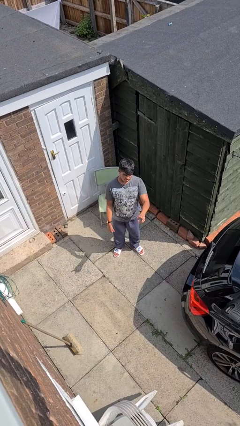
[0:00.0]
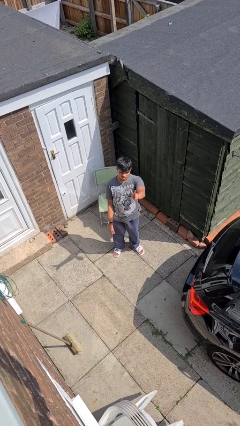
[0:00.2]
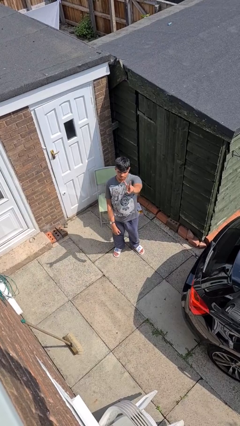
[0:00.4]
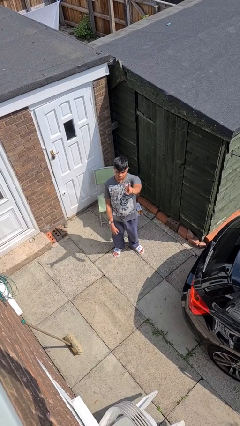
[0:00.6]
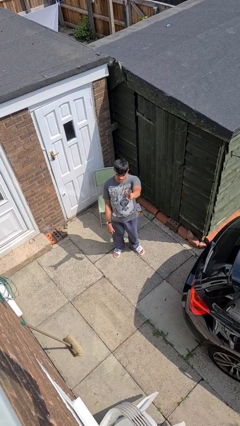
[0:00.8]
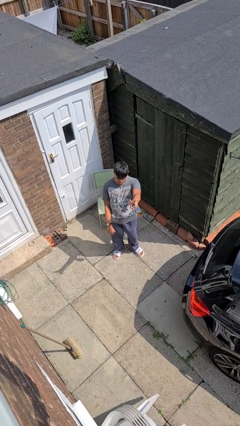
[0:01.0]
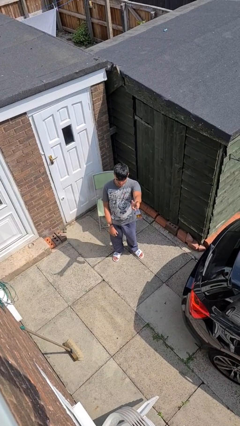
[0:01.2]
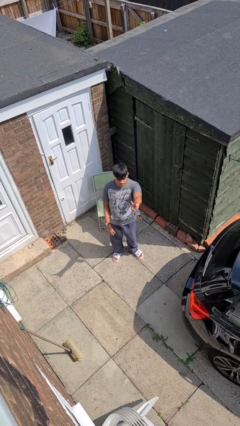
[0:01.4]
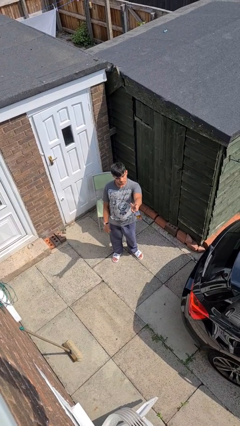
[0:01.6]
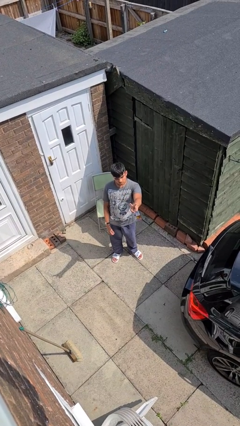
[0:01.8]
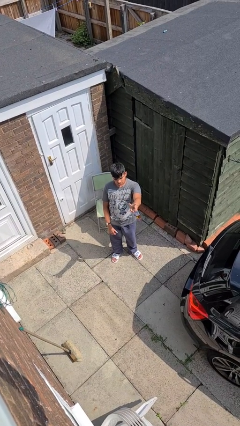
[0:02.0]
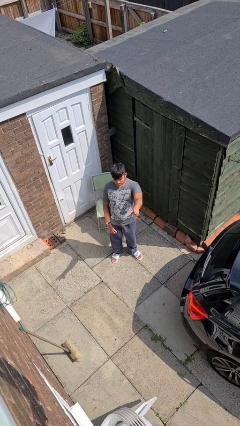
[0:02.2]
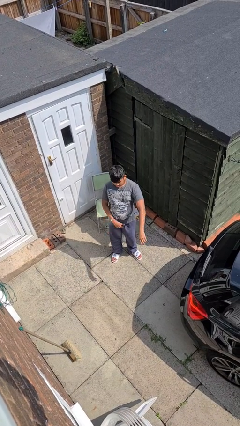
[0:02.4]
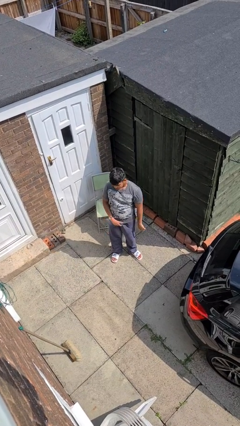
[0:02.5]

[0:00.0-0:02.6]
person gestures peace

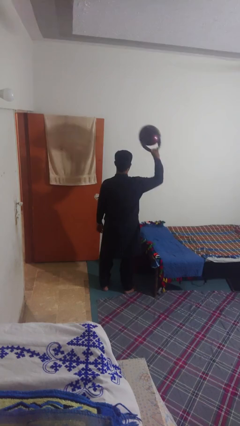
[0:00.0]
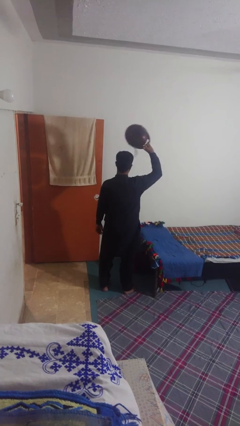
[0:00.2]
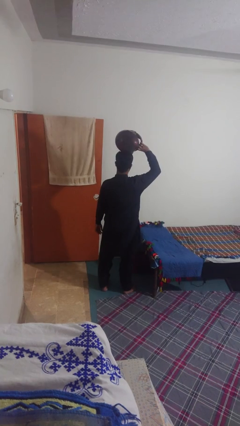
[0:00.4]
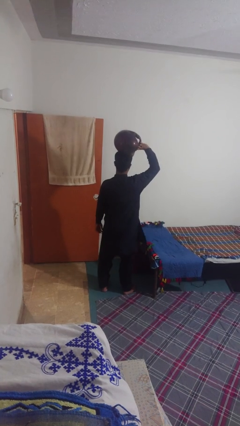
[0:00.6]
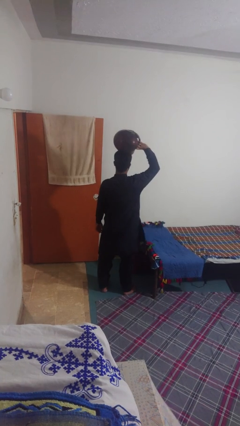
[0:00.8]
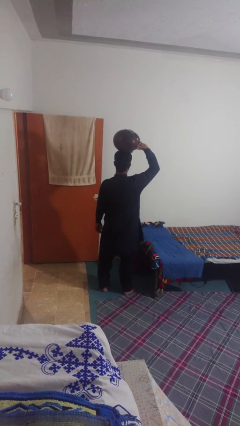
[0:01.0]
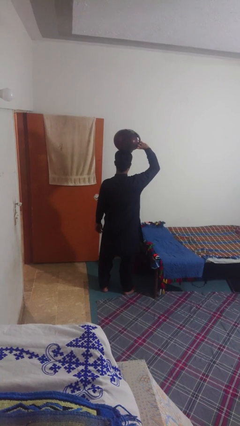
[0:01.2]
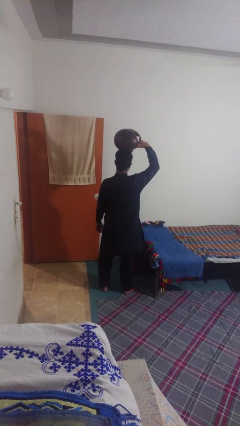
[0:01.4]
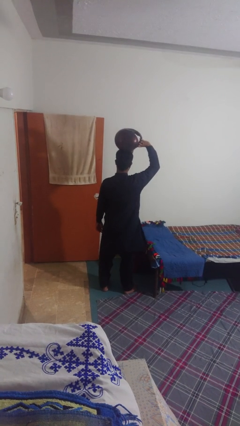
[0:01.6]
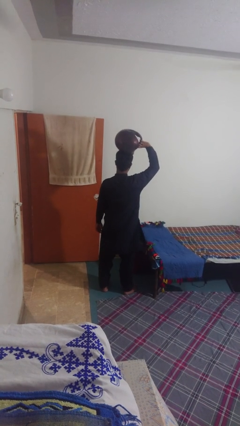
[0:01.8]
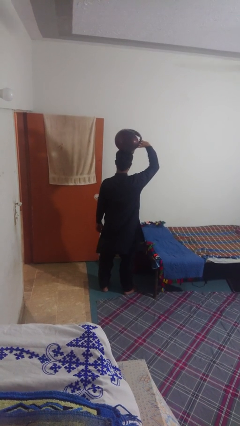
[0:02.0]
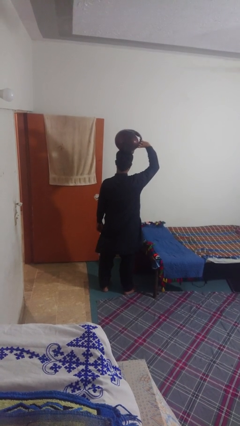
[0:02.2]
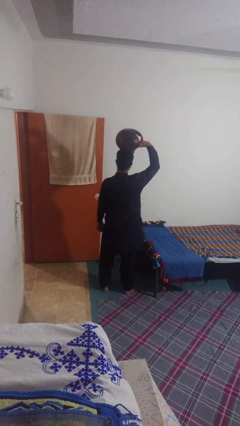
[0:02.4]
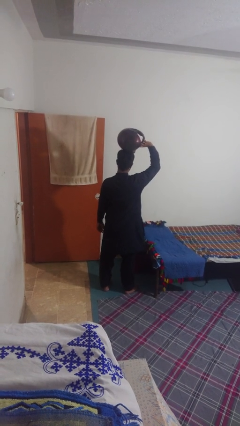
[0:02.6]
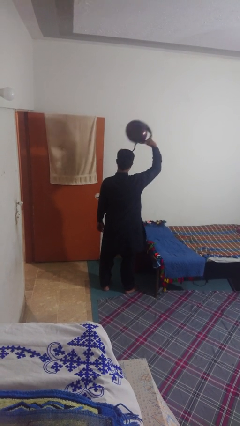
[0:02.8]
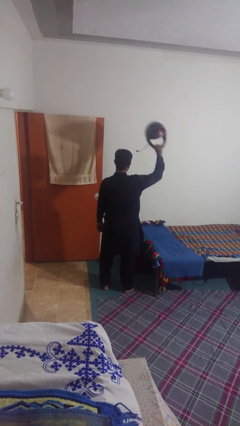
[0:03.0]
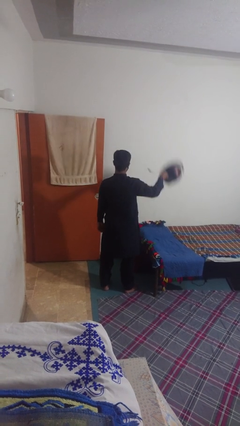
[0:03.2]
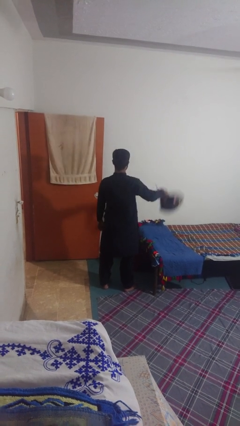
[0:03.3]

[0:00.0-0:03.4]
person holds object above head

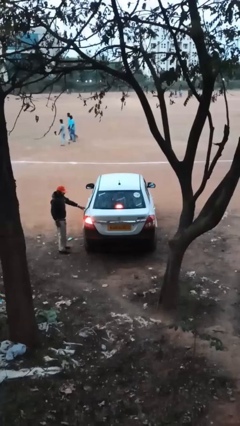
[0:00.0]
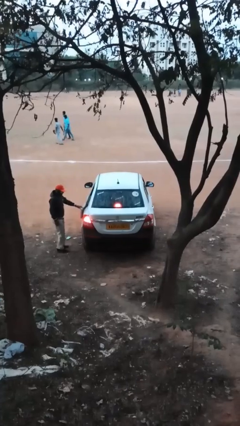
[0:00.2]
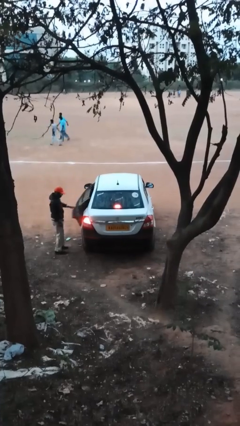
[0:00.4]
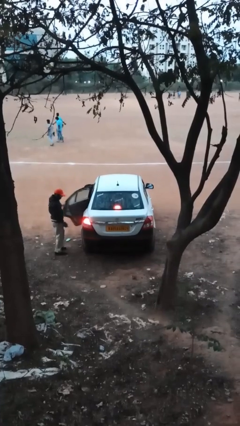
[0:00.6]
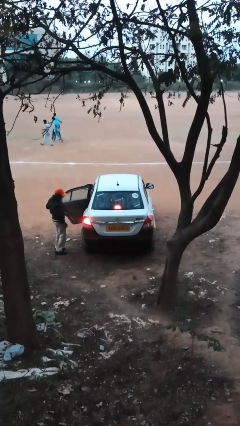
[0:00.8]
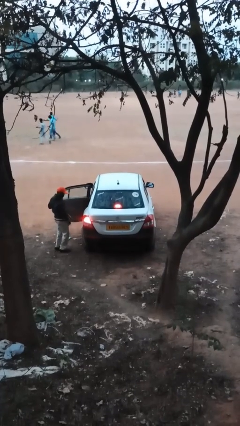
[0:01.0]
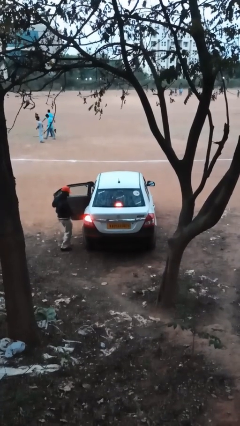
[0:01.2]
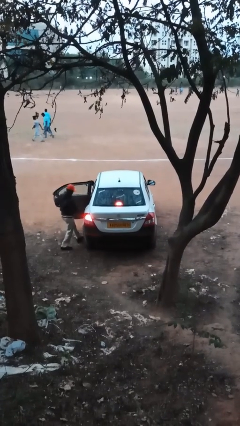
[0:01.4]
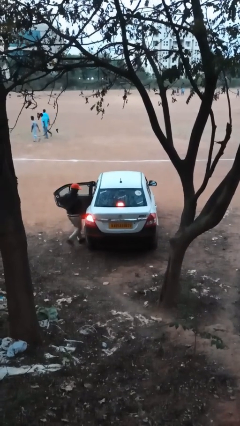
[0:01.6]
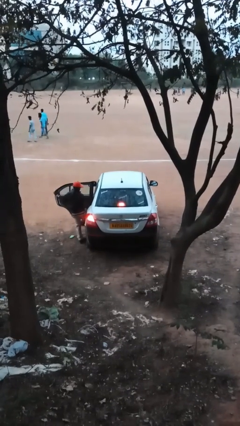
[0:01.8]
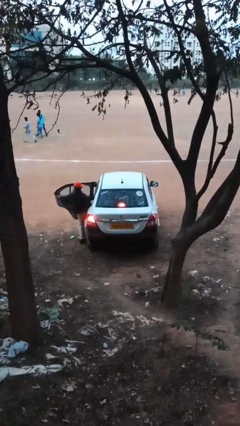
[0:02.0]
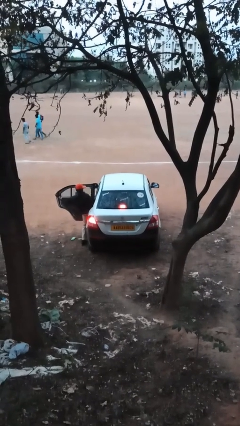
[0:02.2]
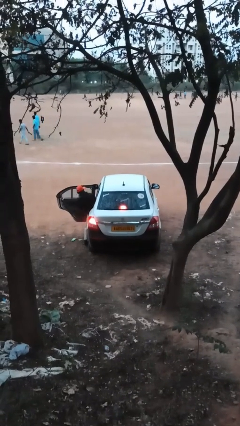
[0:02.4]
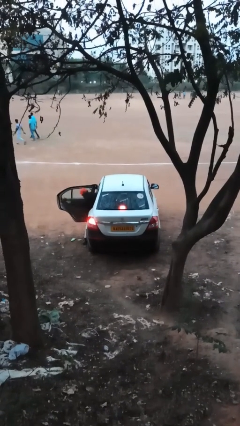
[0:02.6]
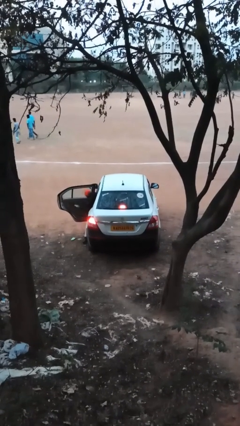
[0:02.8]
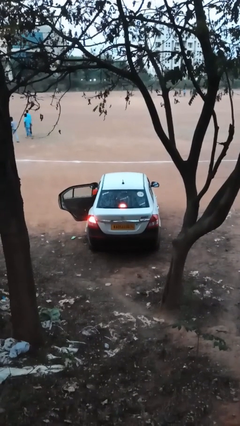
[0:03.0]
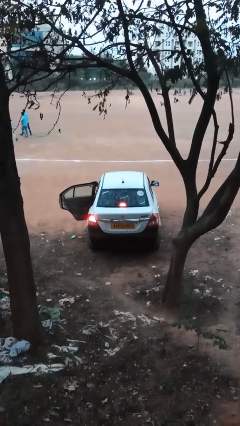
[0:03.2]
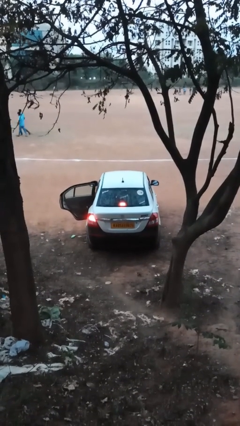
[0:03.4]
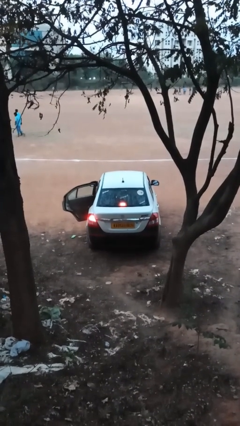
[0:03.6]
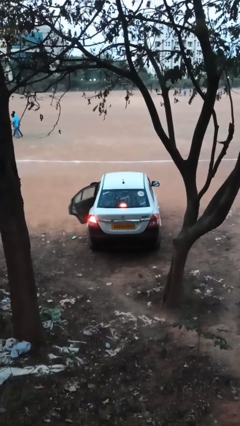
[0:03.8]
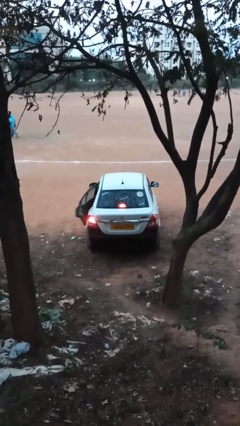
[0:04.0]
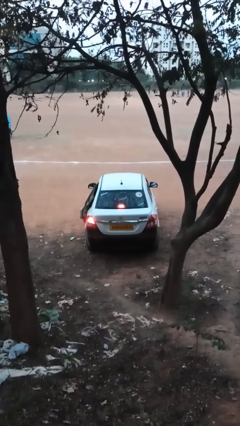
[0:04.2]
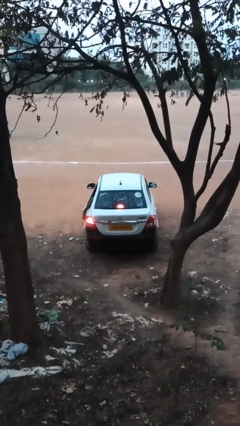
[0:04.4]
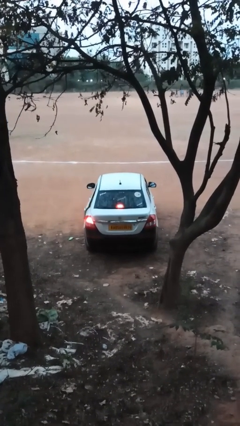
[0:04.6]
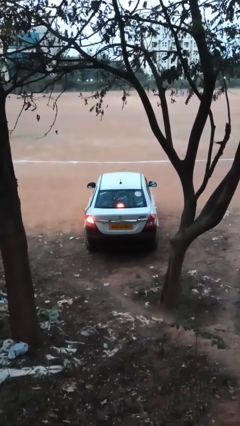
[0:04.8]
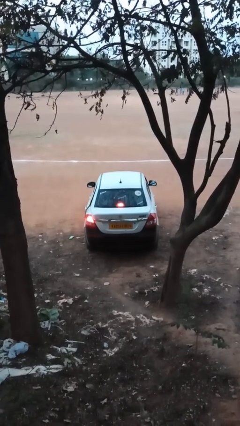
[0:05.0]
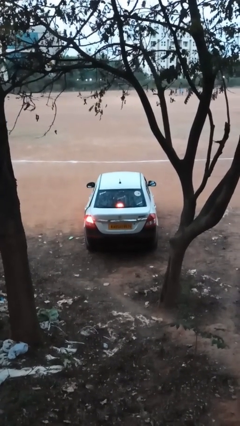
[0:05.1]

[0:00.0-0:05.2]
car picks up person

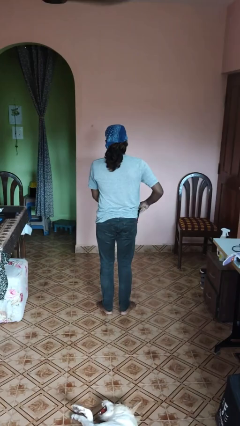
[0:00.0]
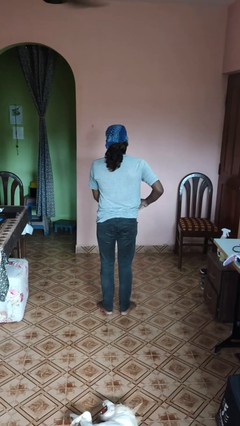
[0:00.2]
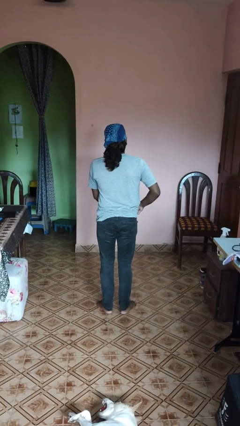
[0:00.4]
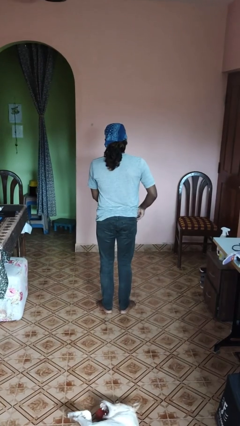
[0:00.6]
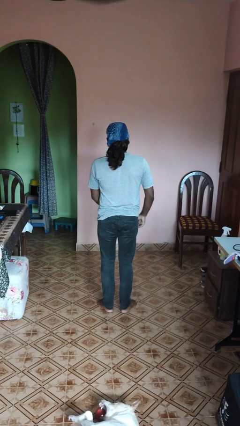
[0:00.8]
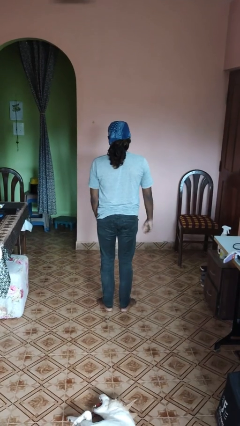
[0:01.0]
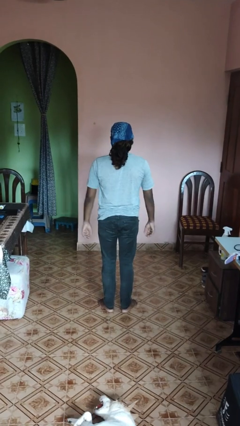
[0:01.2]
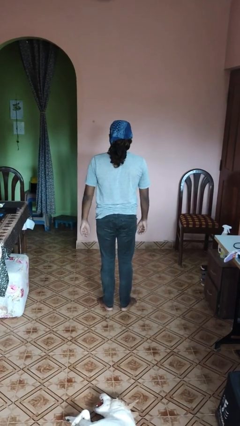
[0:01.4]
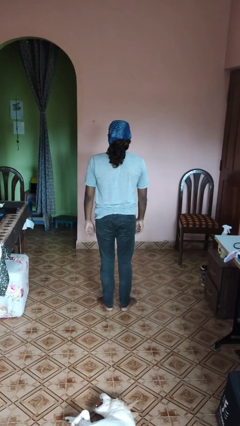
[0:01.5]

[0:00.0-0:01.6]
person puts phone into pocket

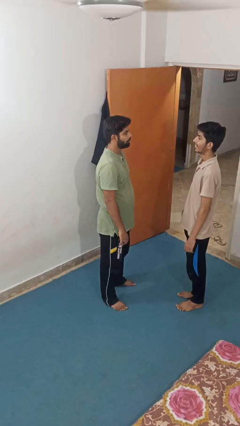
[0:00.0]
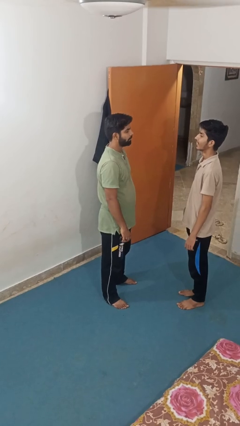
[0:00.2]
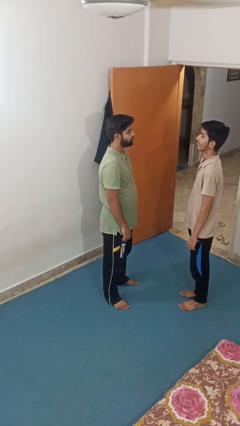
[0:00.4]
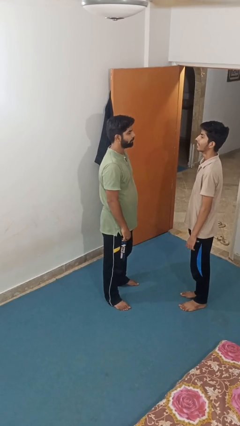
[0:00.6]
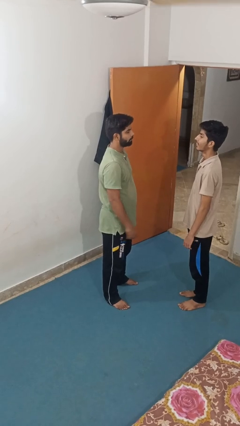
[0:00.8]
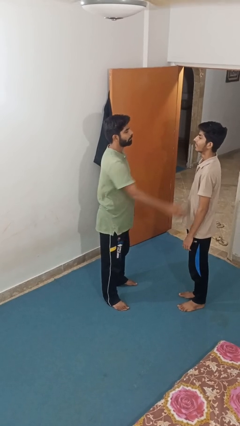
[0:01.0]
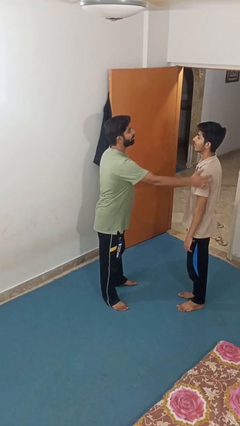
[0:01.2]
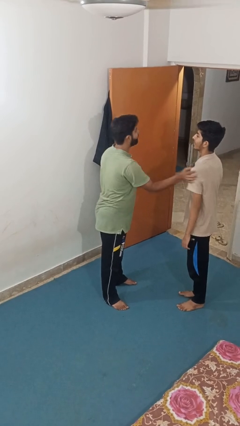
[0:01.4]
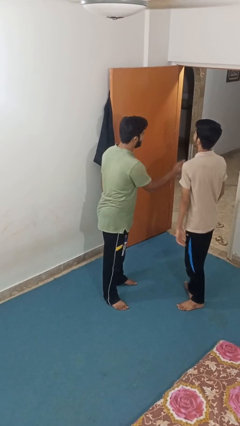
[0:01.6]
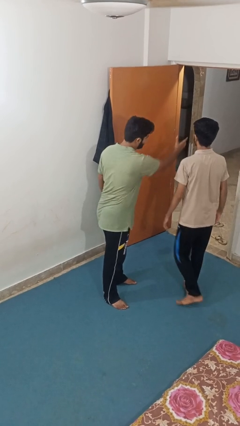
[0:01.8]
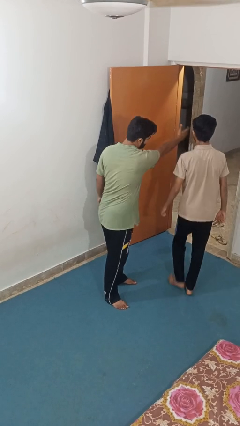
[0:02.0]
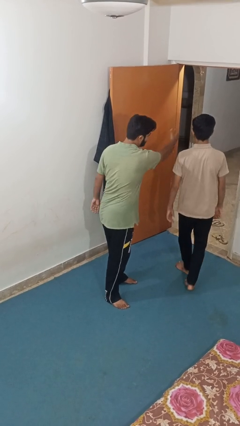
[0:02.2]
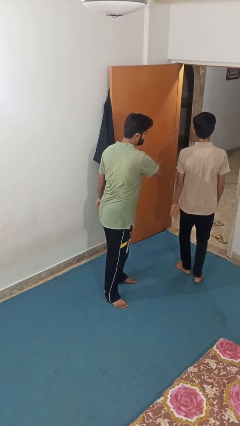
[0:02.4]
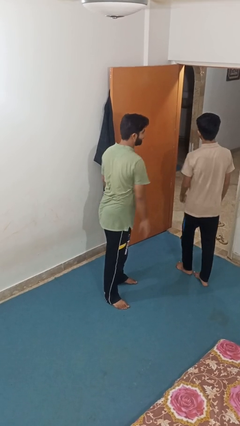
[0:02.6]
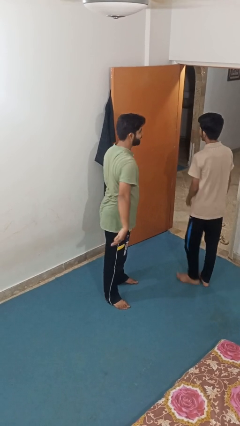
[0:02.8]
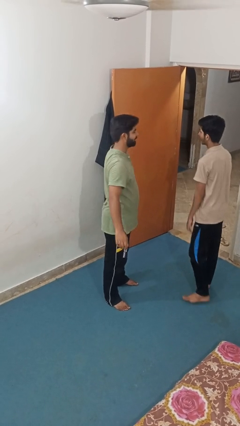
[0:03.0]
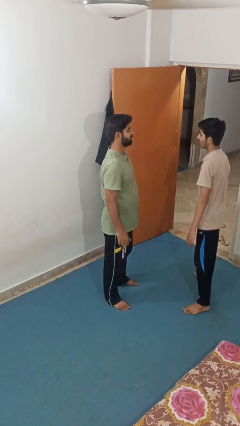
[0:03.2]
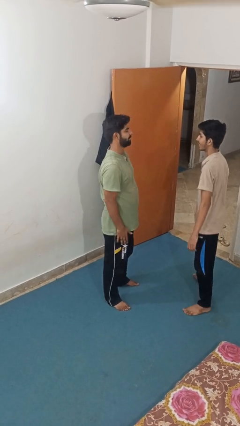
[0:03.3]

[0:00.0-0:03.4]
person shoves person

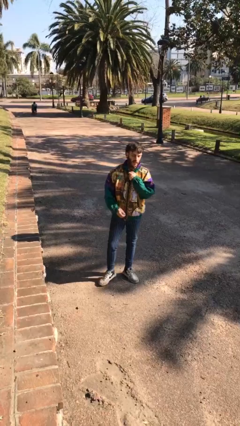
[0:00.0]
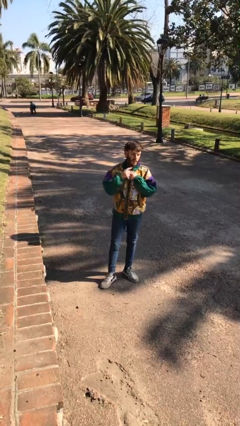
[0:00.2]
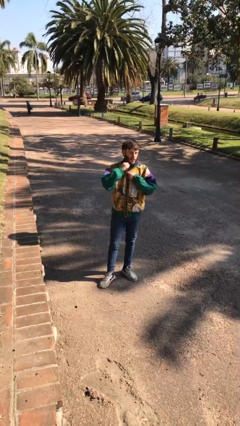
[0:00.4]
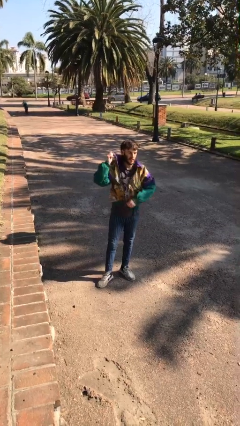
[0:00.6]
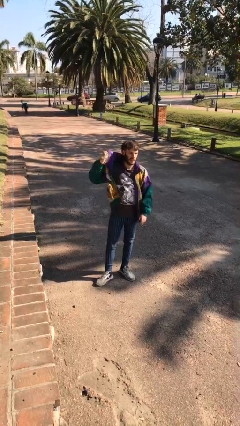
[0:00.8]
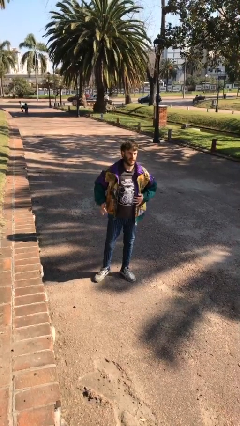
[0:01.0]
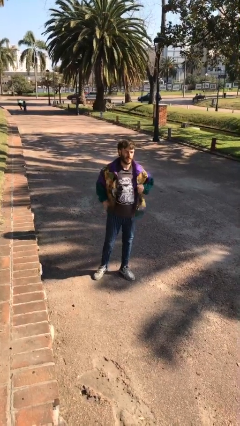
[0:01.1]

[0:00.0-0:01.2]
person unzips jacket

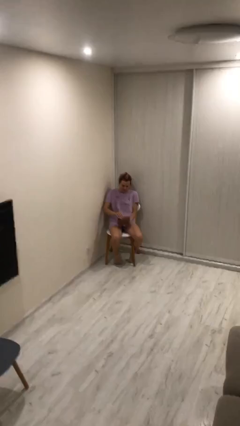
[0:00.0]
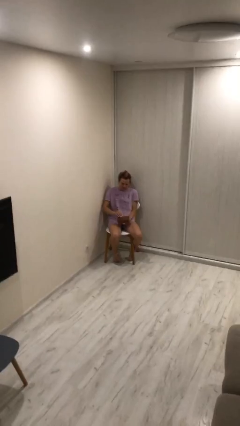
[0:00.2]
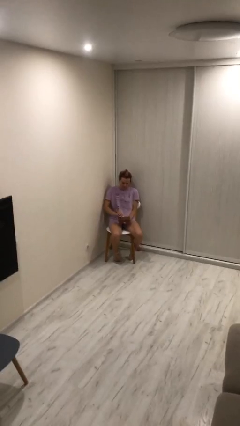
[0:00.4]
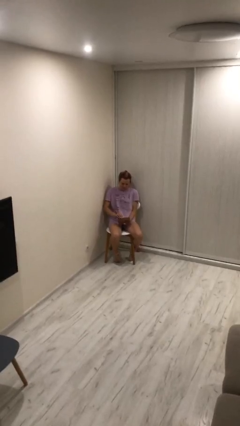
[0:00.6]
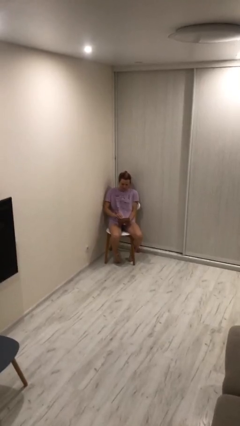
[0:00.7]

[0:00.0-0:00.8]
person closes jewelry box
